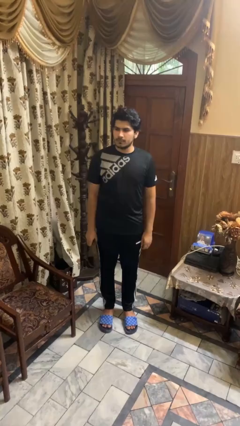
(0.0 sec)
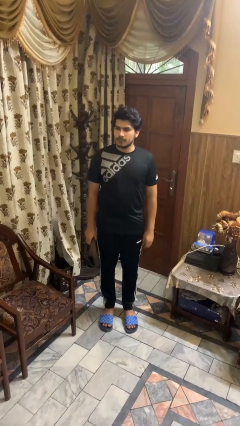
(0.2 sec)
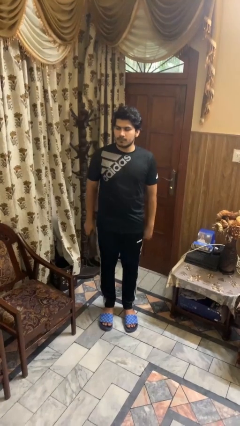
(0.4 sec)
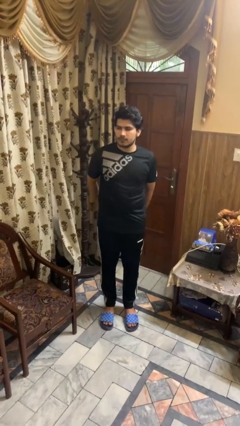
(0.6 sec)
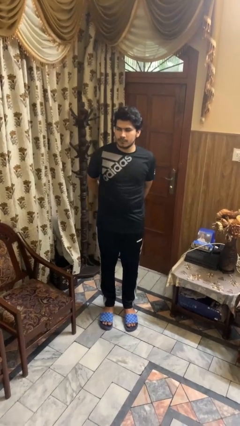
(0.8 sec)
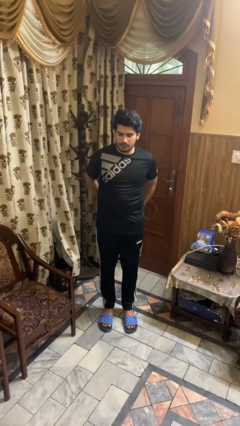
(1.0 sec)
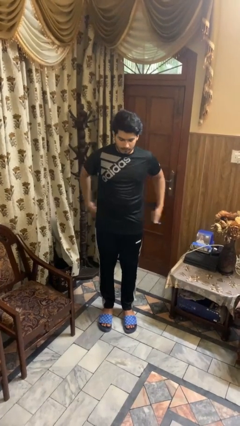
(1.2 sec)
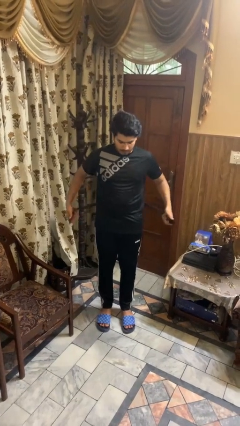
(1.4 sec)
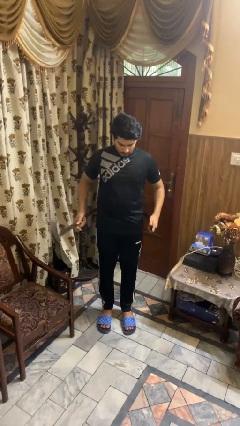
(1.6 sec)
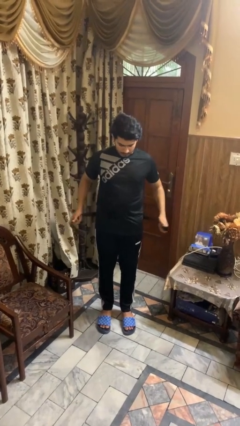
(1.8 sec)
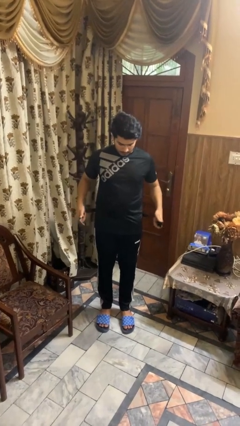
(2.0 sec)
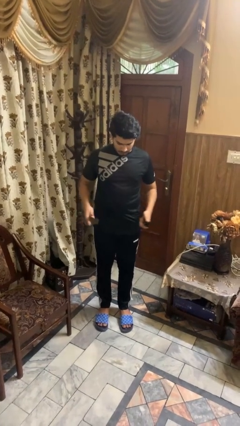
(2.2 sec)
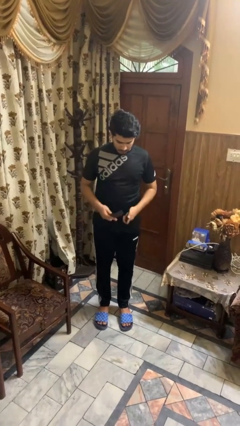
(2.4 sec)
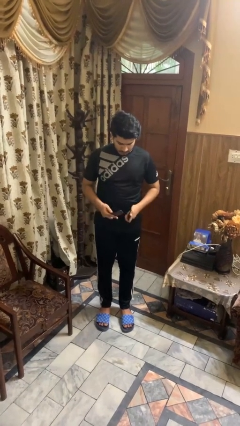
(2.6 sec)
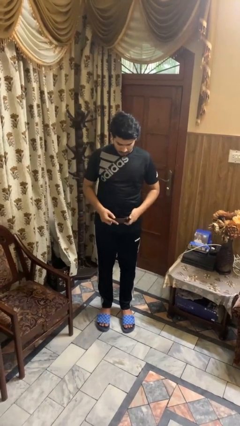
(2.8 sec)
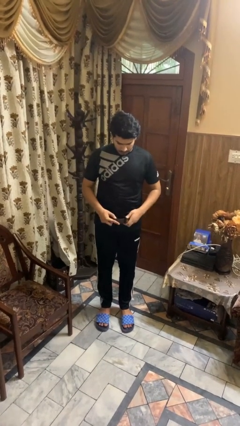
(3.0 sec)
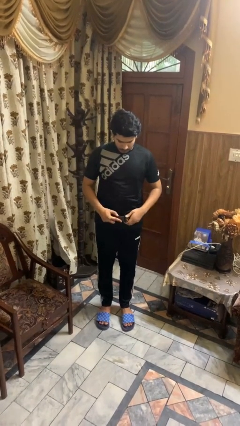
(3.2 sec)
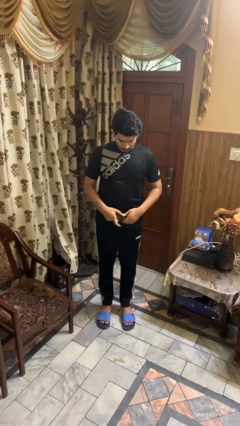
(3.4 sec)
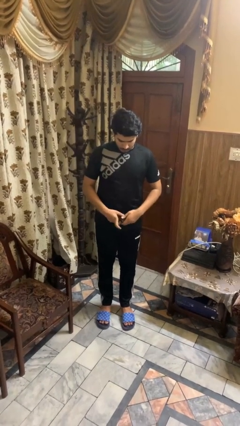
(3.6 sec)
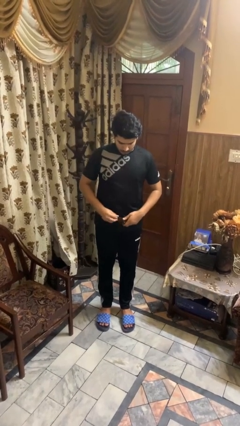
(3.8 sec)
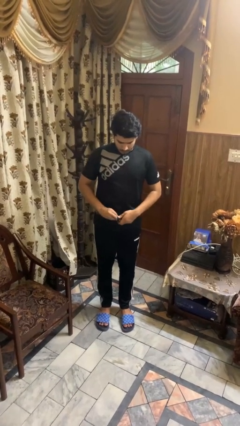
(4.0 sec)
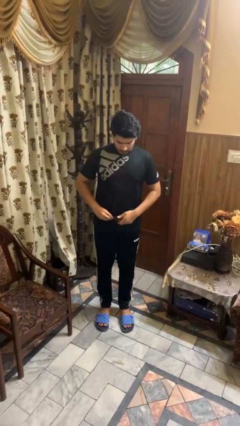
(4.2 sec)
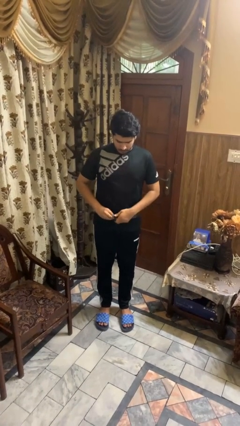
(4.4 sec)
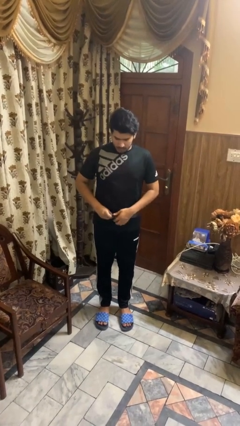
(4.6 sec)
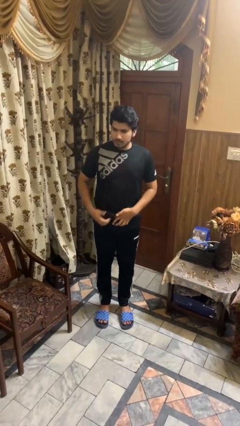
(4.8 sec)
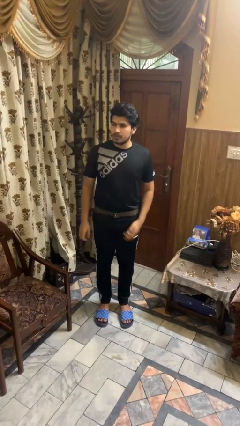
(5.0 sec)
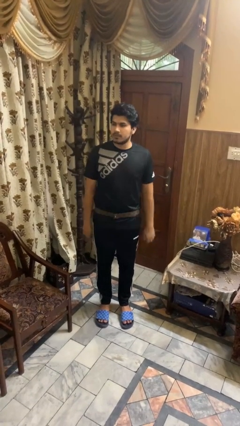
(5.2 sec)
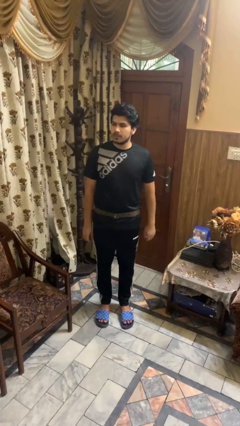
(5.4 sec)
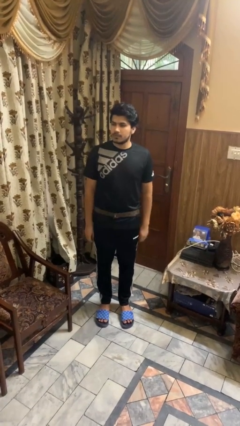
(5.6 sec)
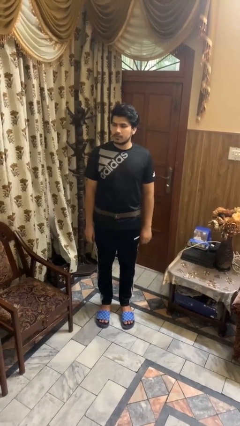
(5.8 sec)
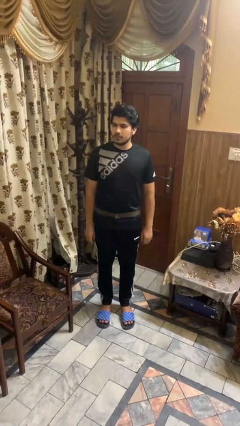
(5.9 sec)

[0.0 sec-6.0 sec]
person puts on belt

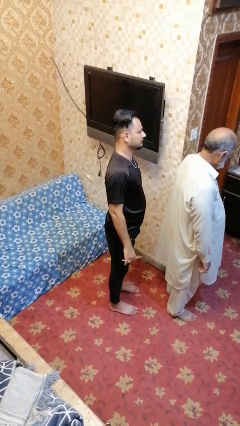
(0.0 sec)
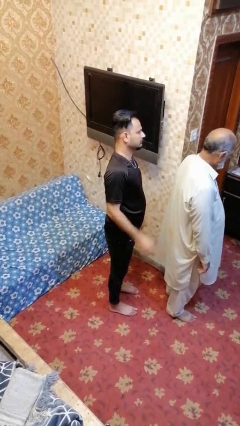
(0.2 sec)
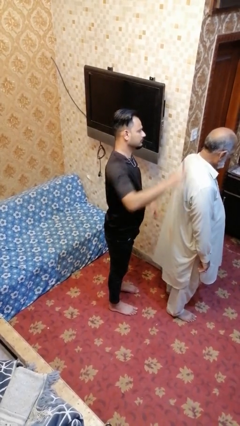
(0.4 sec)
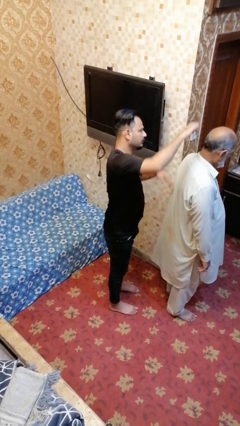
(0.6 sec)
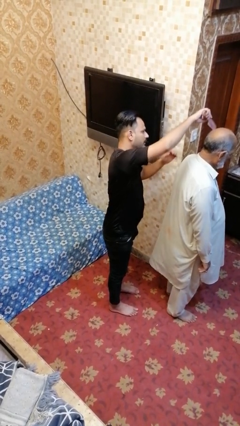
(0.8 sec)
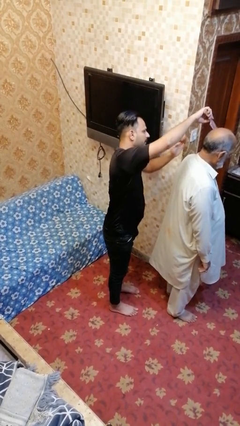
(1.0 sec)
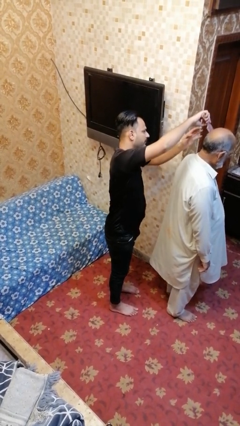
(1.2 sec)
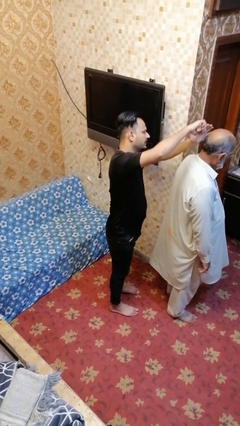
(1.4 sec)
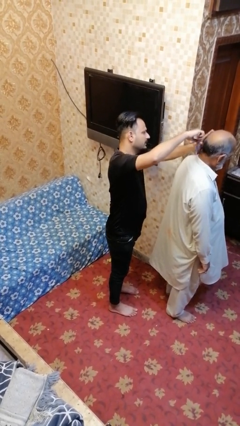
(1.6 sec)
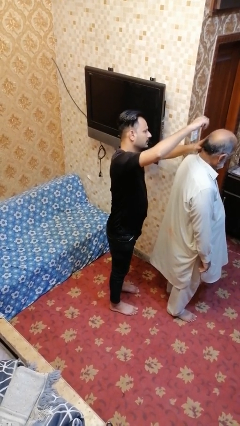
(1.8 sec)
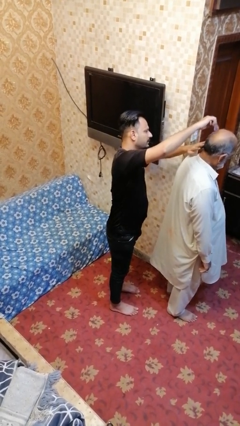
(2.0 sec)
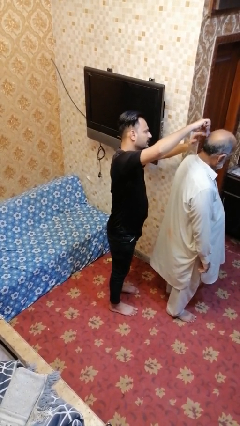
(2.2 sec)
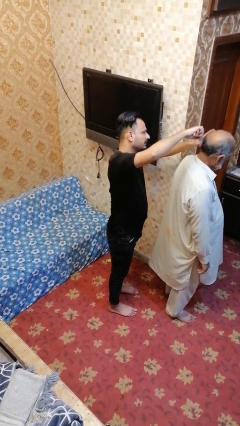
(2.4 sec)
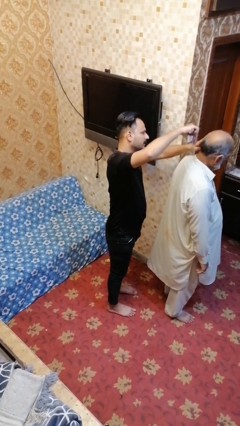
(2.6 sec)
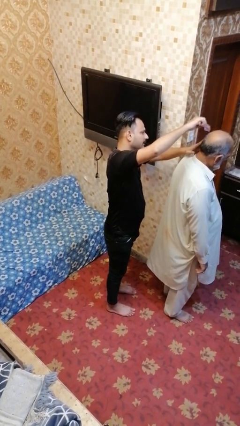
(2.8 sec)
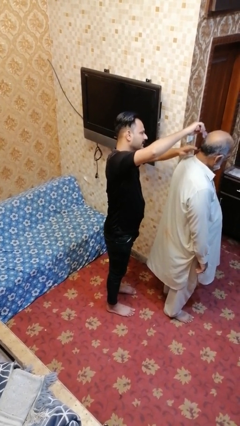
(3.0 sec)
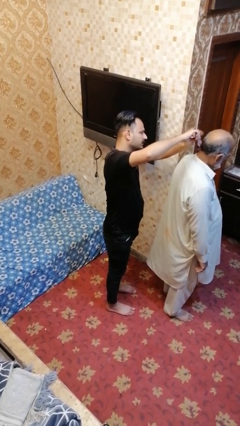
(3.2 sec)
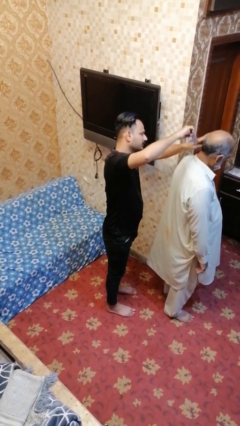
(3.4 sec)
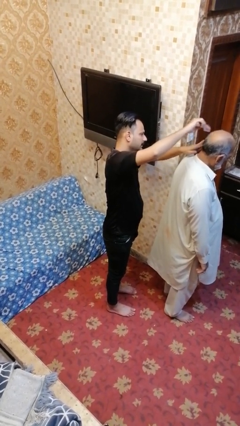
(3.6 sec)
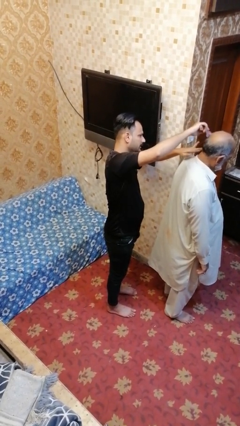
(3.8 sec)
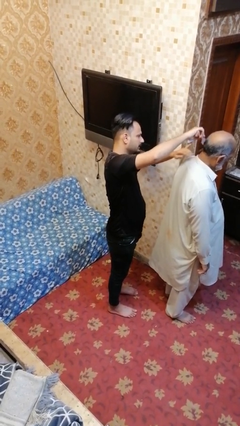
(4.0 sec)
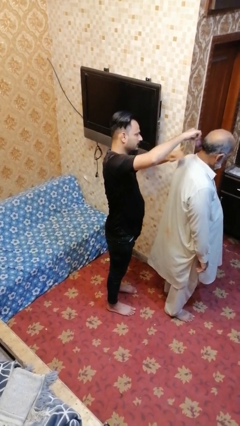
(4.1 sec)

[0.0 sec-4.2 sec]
person brushes hair of person

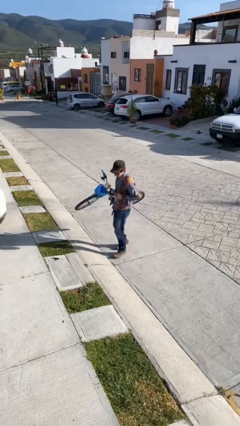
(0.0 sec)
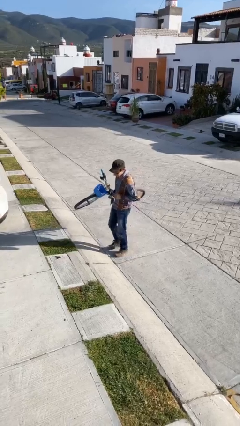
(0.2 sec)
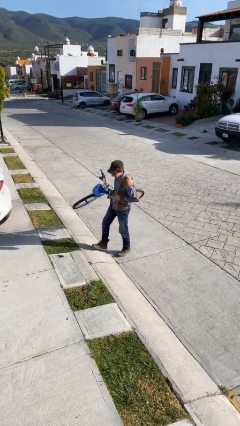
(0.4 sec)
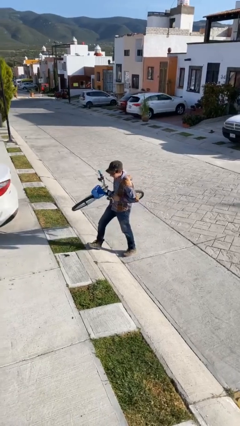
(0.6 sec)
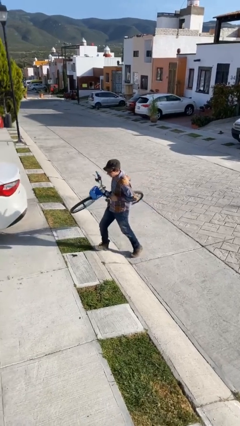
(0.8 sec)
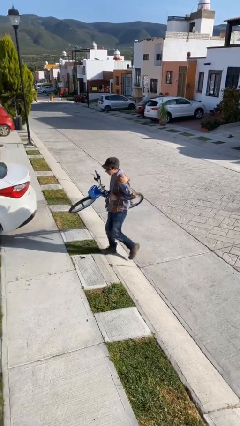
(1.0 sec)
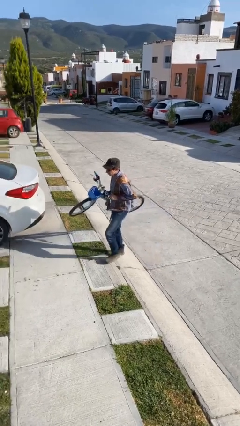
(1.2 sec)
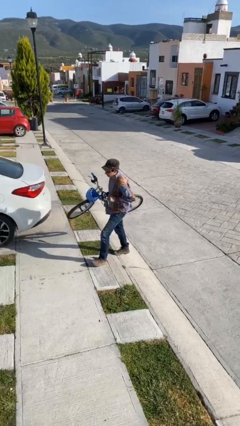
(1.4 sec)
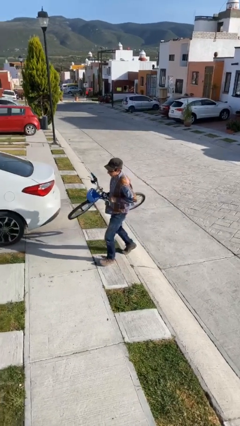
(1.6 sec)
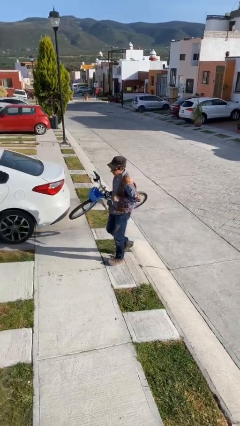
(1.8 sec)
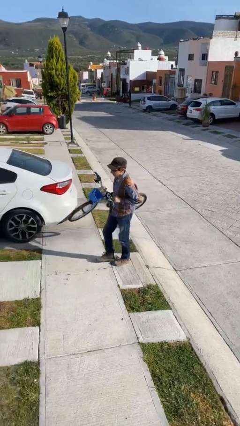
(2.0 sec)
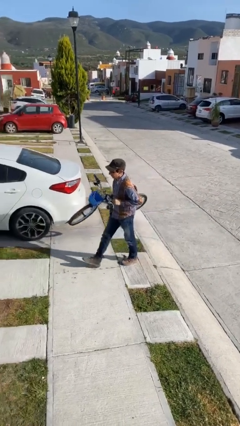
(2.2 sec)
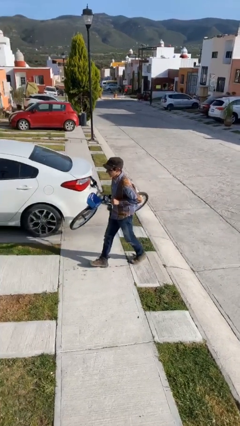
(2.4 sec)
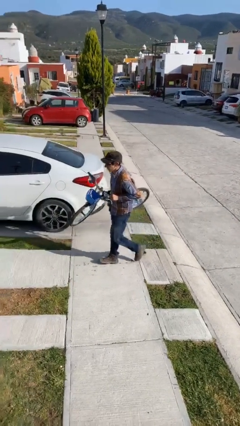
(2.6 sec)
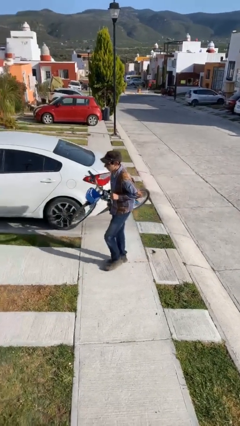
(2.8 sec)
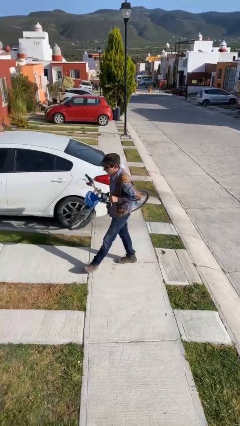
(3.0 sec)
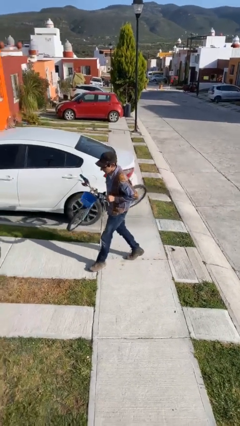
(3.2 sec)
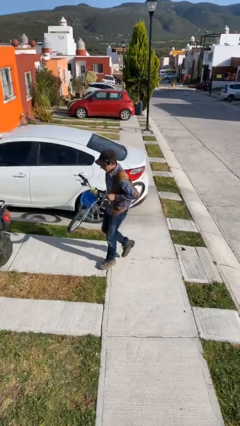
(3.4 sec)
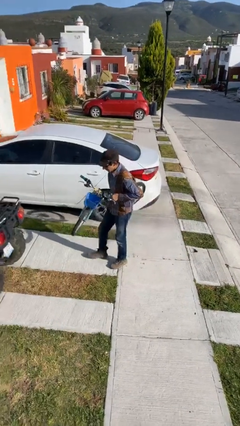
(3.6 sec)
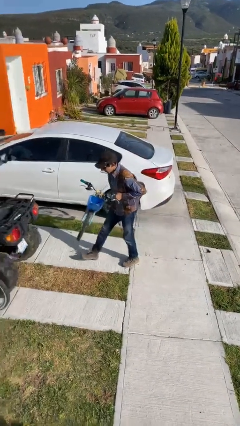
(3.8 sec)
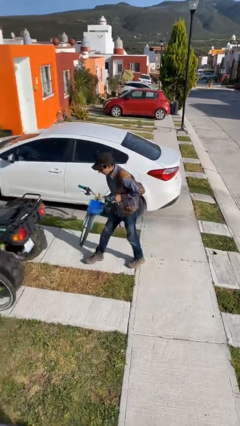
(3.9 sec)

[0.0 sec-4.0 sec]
person carries heavy object

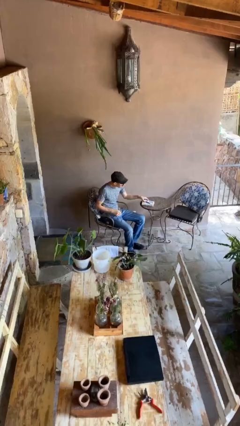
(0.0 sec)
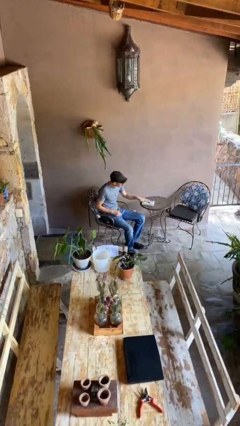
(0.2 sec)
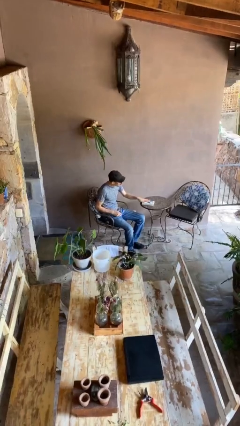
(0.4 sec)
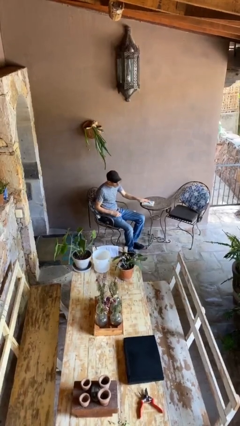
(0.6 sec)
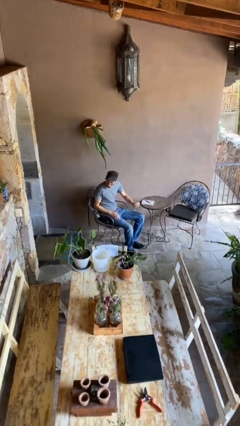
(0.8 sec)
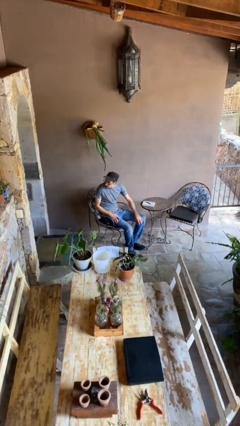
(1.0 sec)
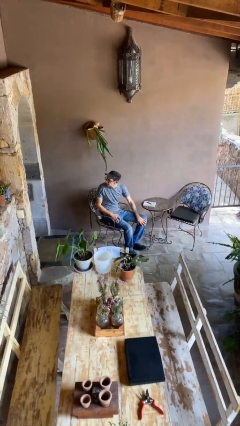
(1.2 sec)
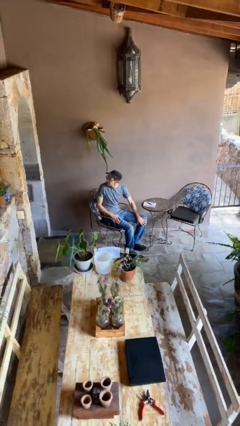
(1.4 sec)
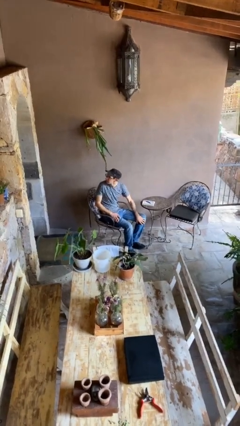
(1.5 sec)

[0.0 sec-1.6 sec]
person puts down object on table

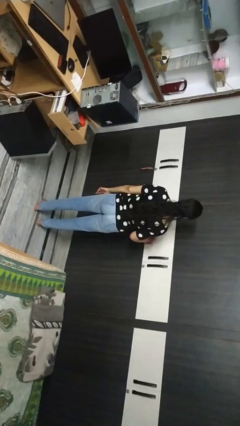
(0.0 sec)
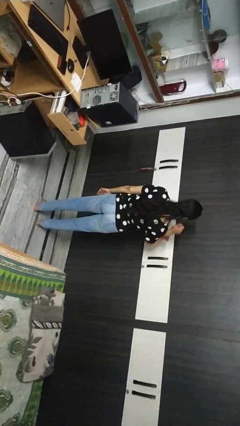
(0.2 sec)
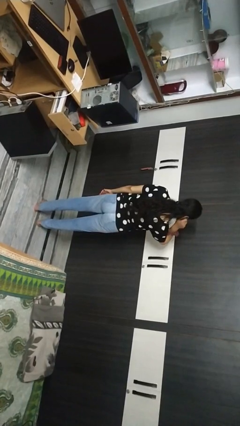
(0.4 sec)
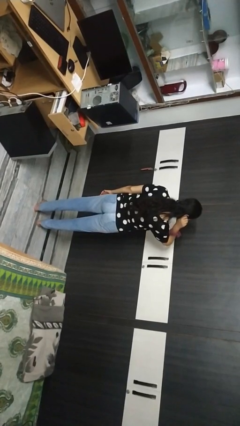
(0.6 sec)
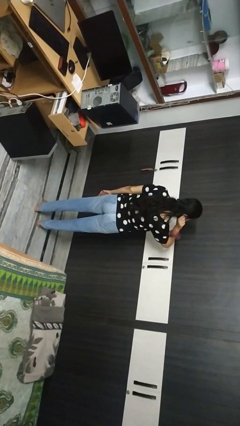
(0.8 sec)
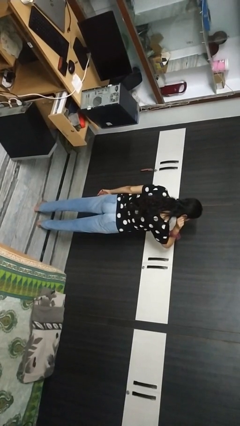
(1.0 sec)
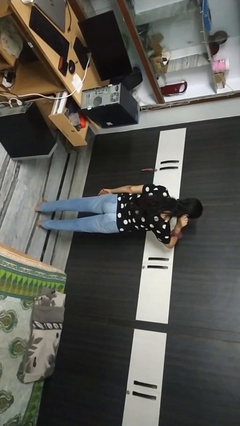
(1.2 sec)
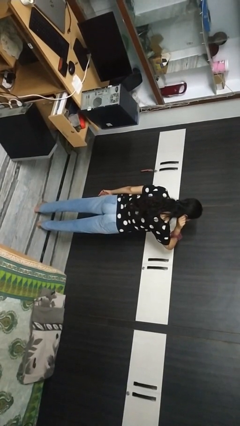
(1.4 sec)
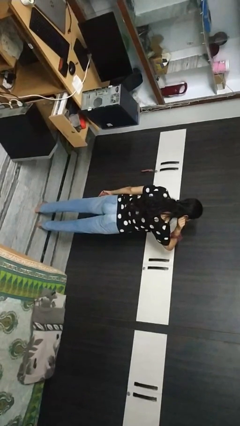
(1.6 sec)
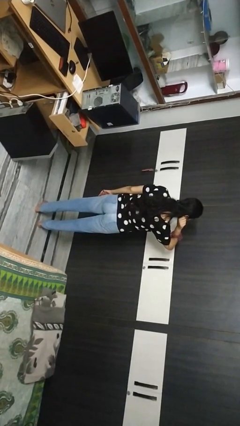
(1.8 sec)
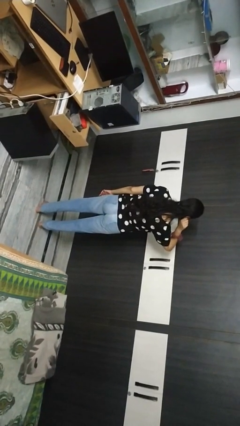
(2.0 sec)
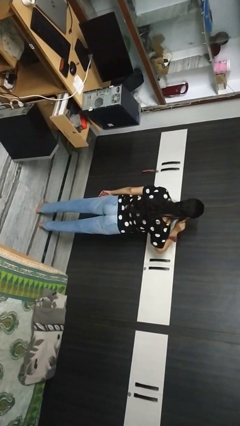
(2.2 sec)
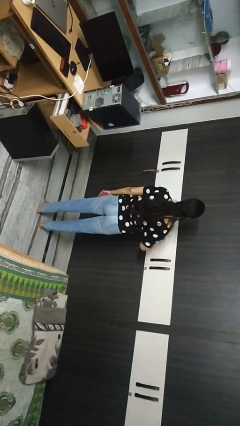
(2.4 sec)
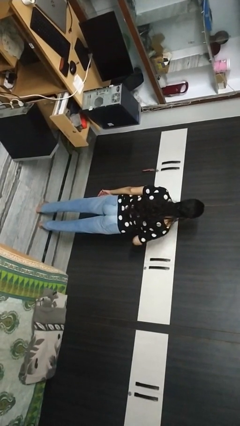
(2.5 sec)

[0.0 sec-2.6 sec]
person touches earlobe
